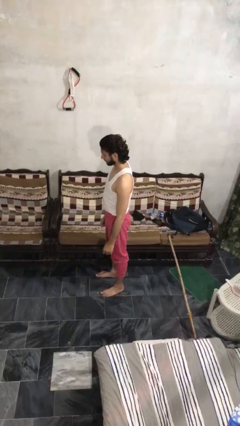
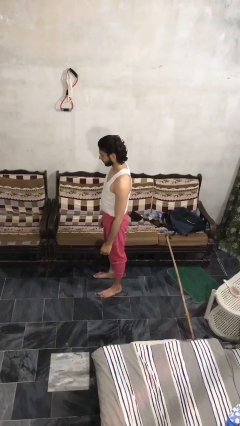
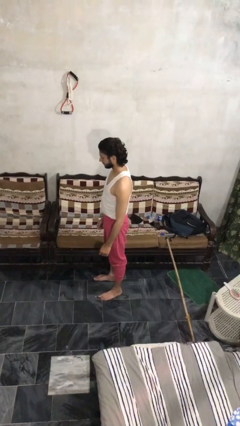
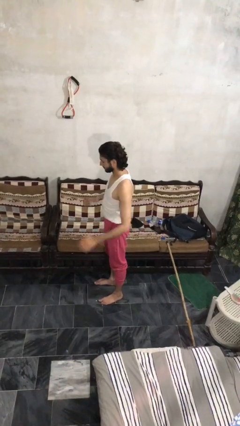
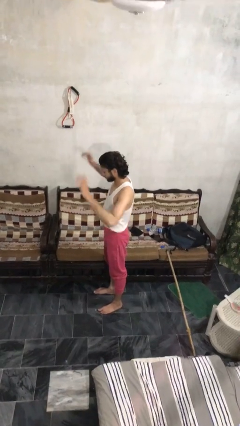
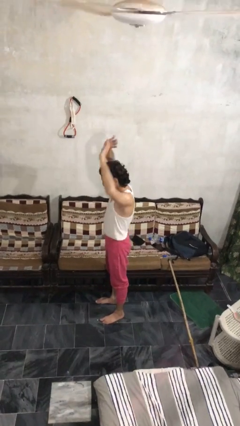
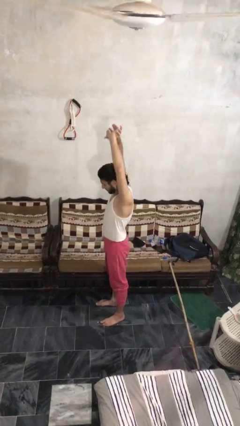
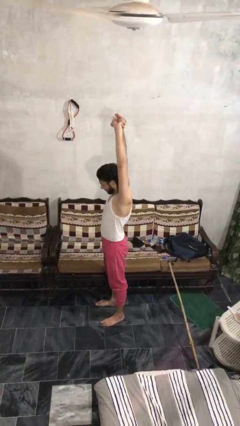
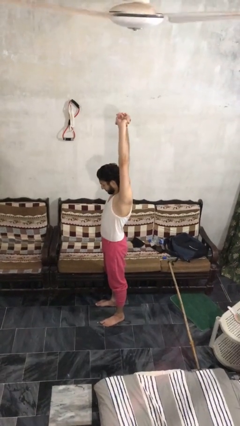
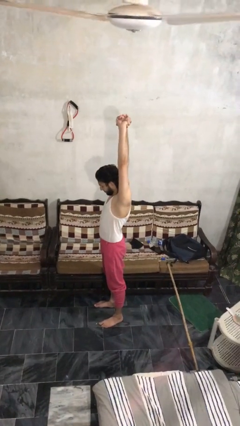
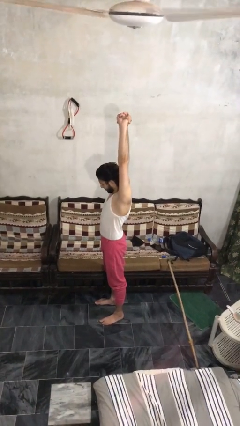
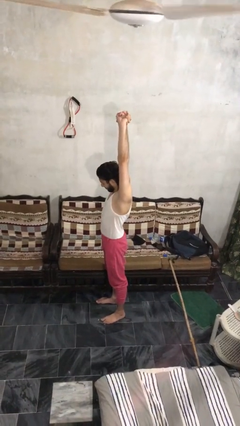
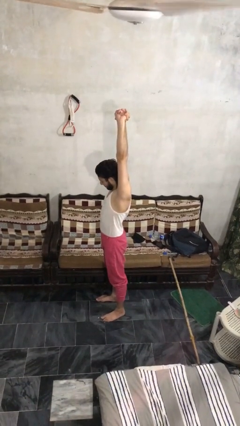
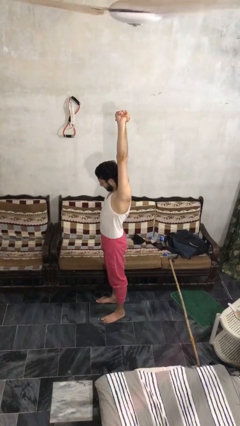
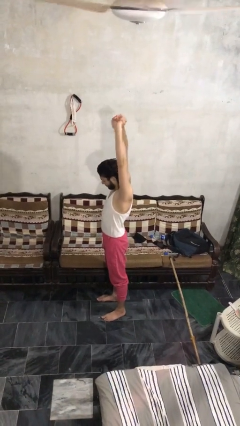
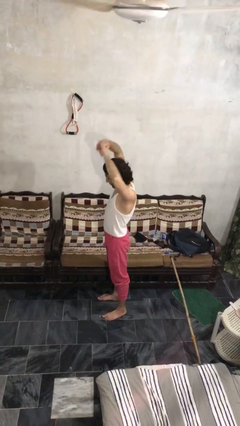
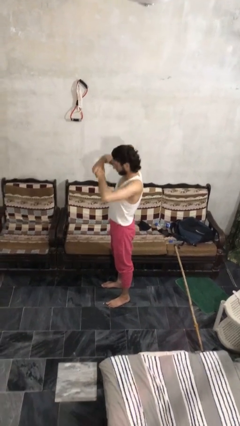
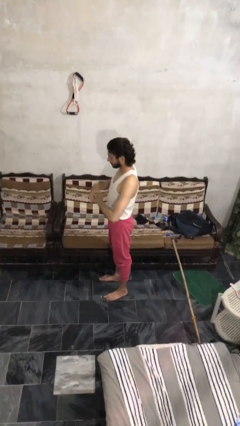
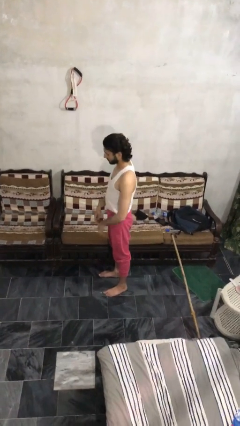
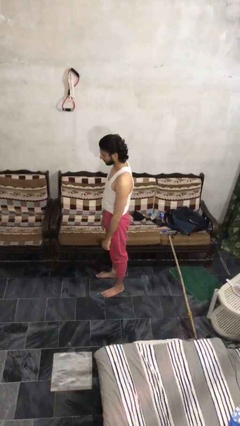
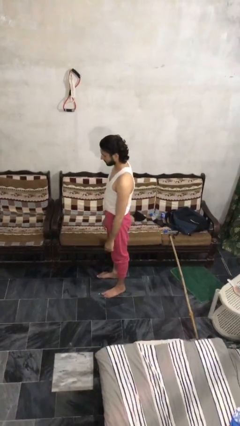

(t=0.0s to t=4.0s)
person stretches arms over head

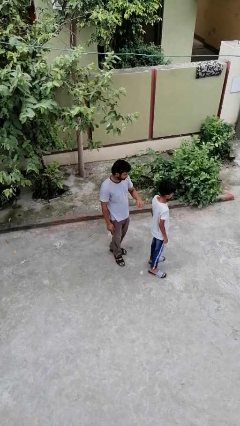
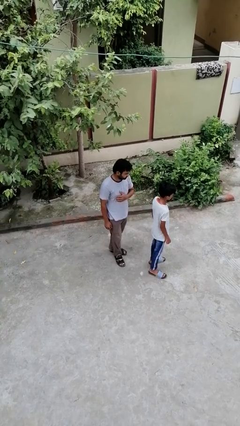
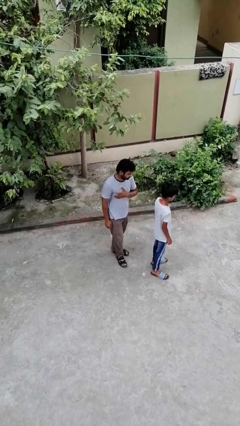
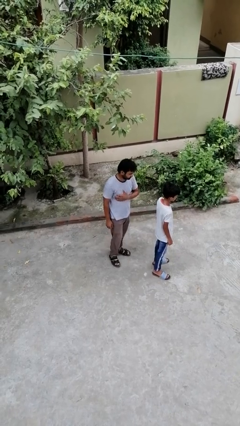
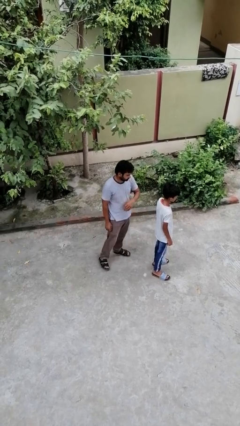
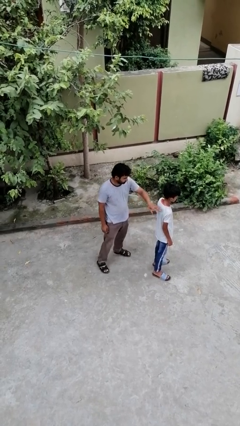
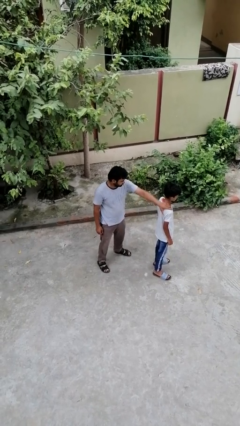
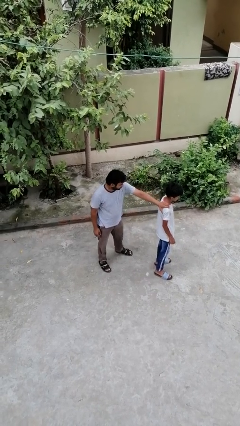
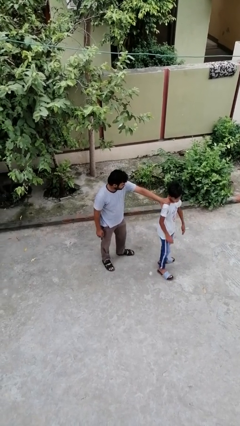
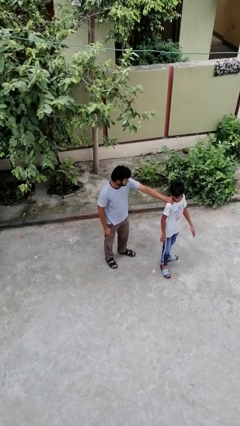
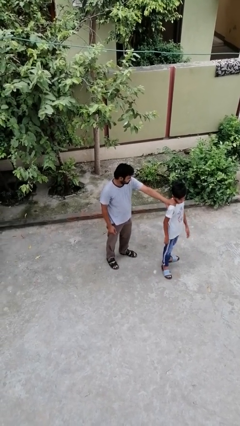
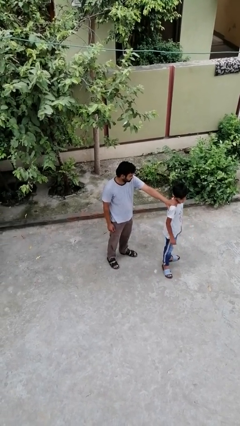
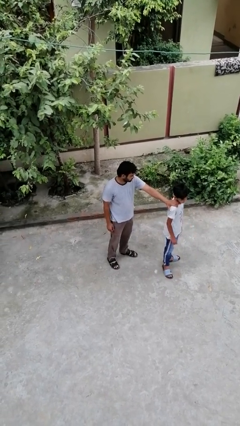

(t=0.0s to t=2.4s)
person grabs person by shoulder

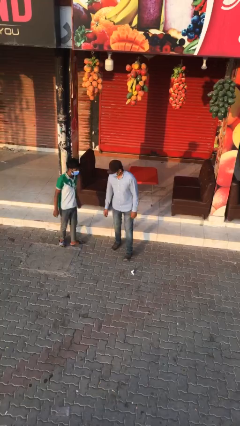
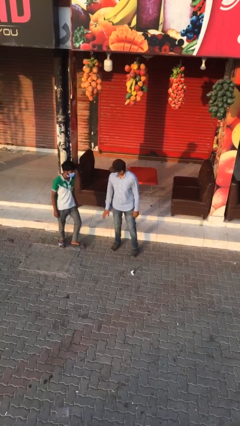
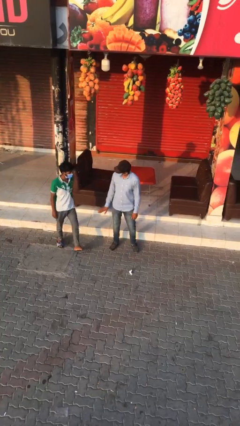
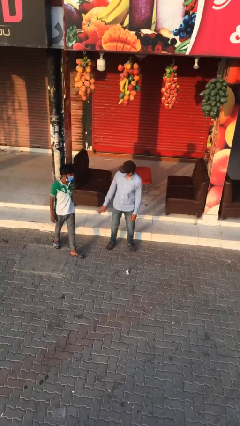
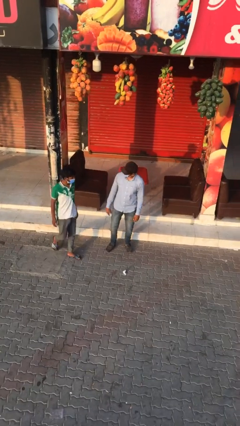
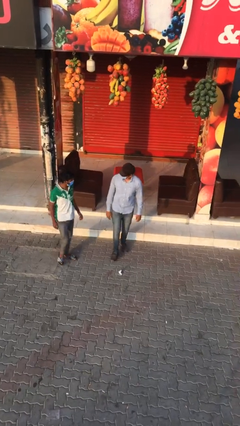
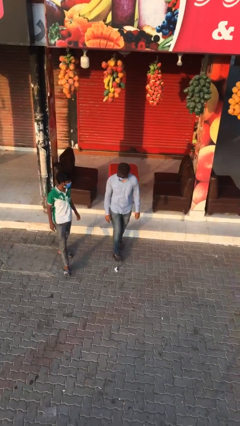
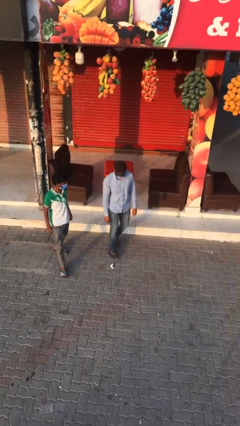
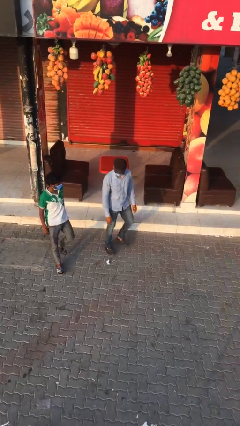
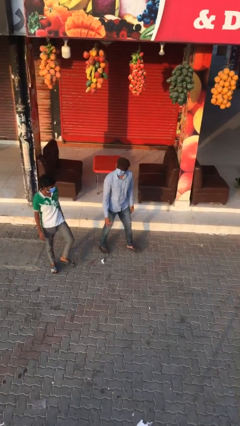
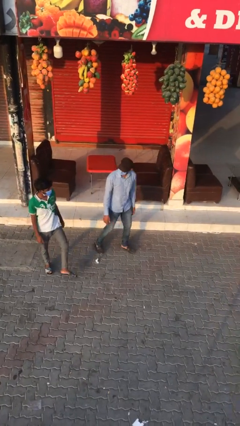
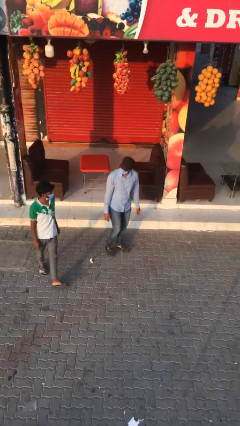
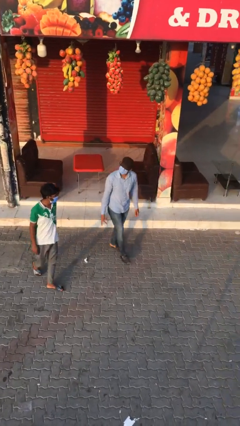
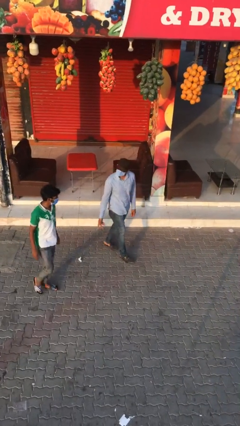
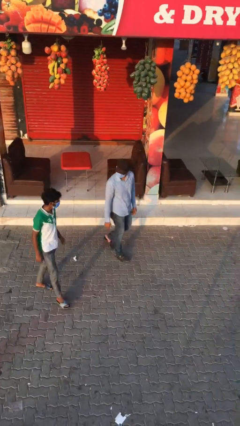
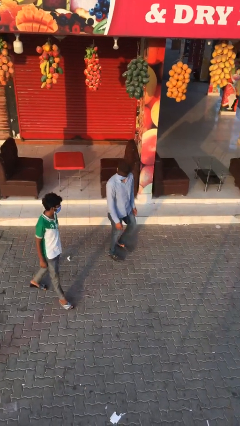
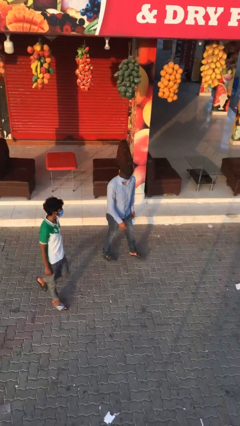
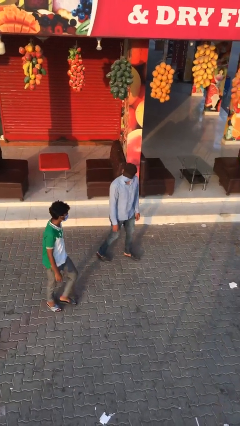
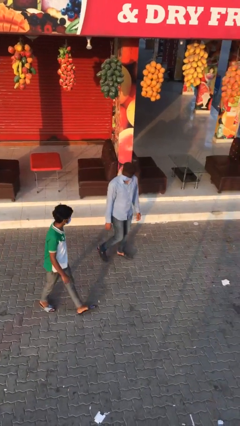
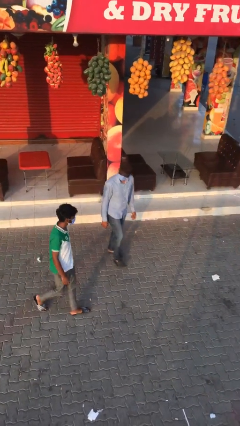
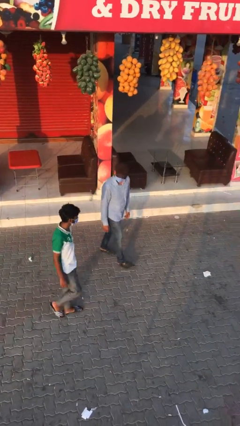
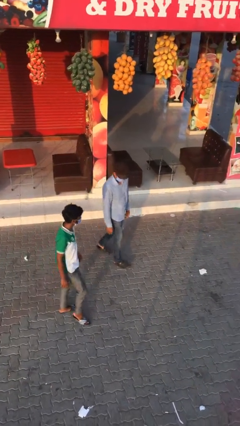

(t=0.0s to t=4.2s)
person talks to person

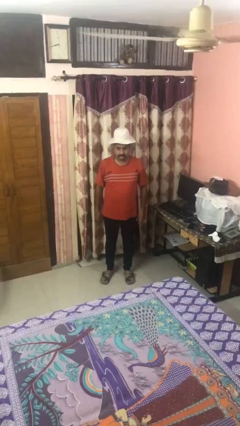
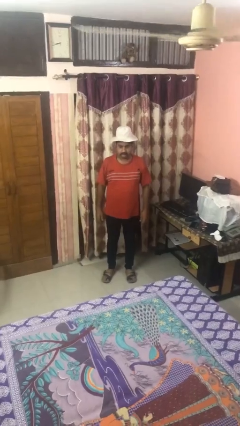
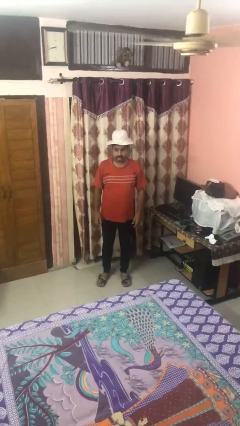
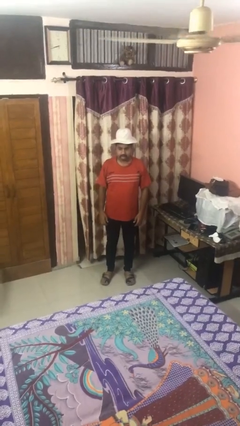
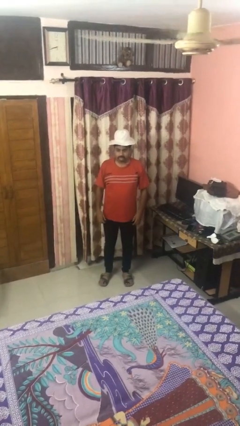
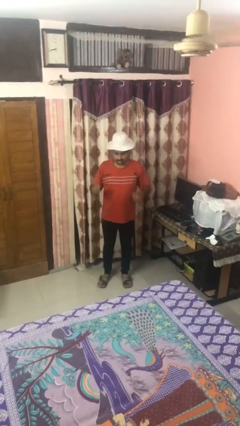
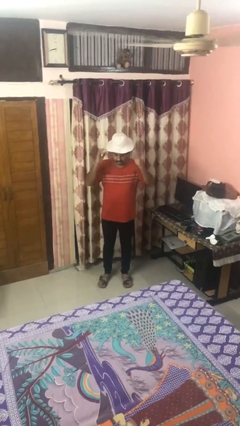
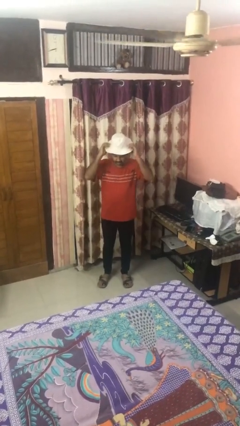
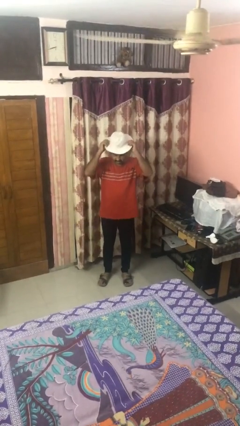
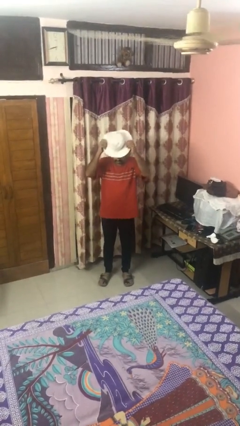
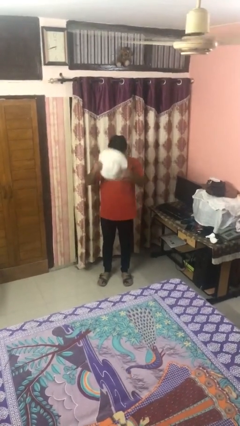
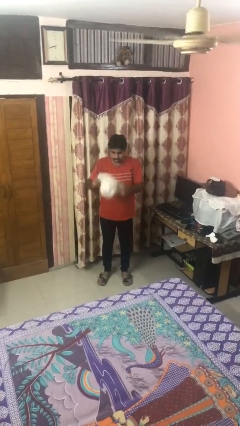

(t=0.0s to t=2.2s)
person takes off hat

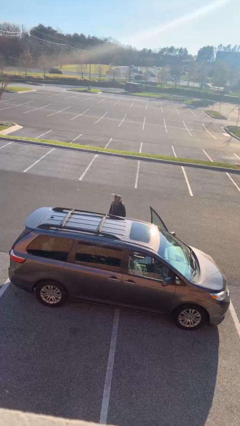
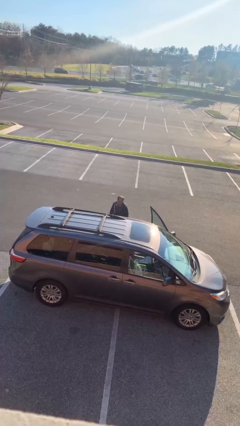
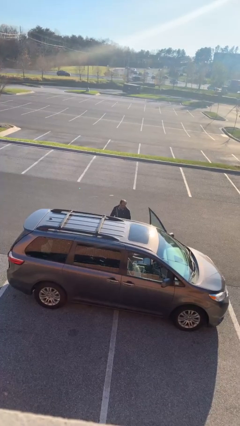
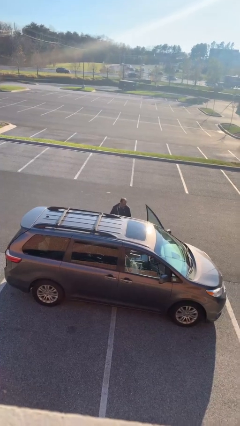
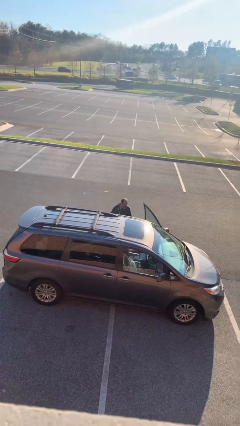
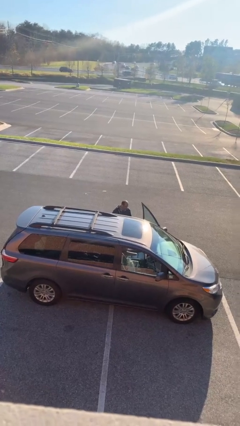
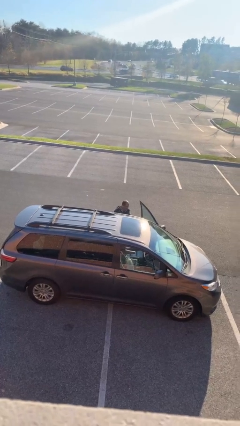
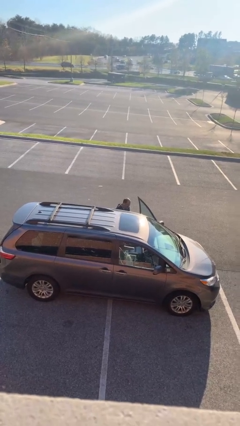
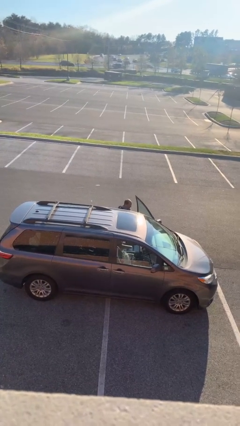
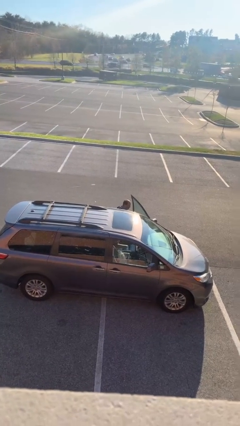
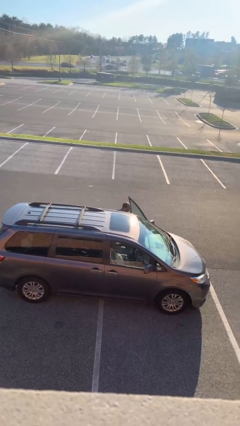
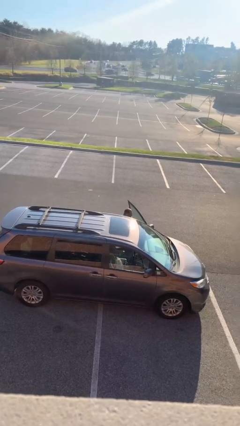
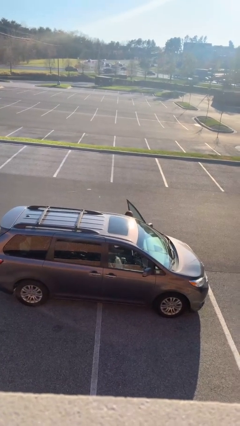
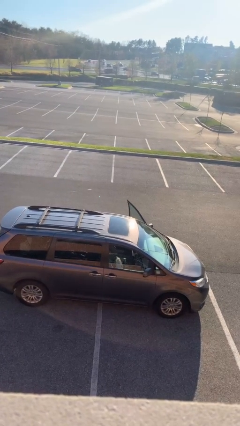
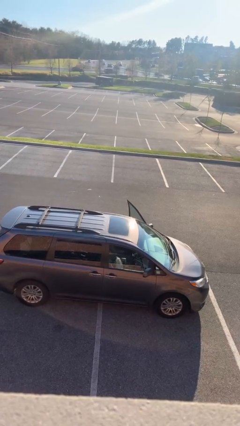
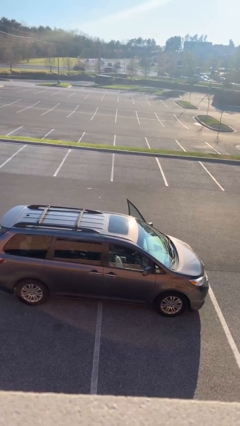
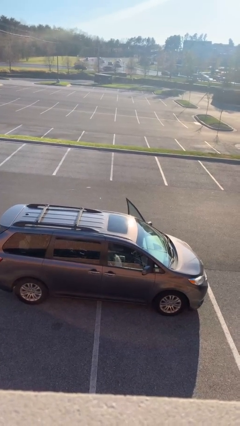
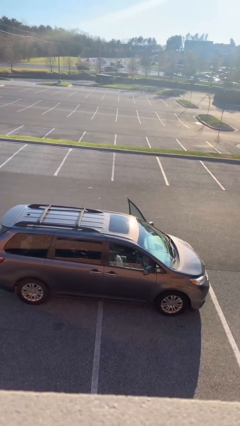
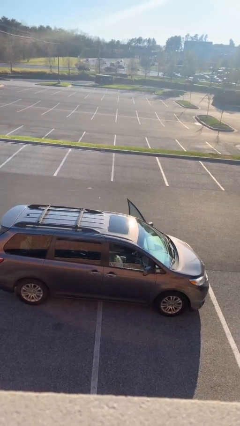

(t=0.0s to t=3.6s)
person enters car

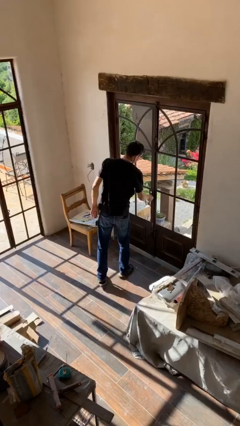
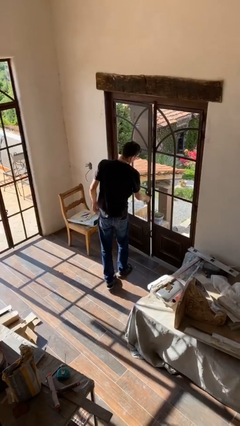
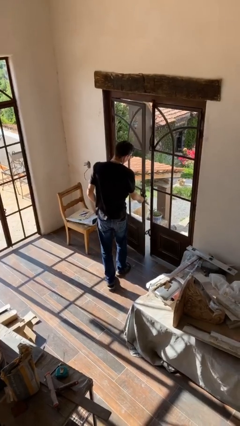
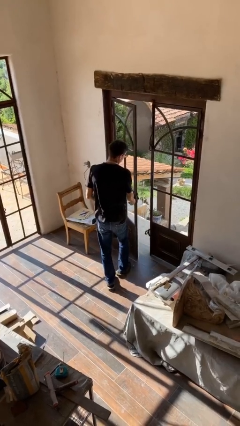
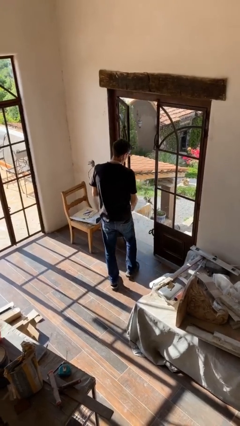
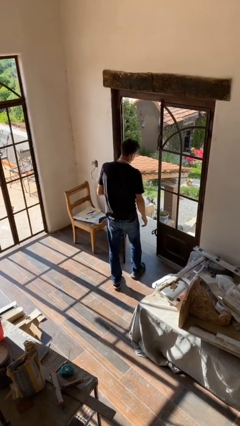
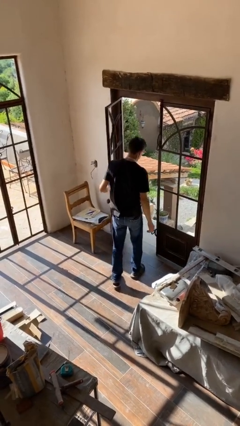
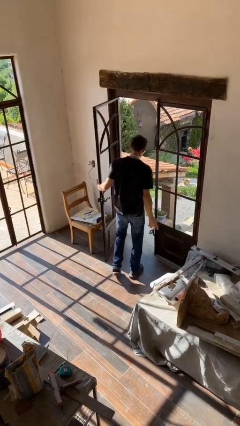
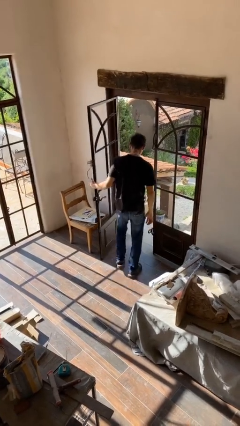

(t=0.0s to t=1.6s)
person opens facility door
